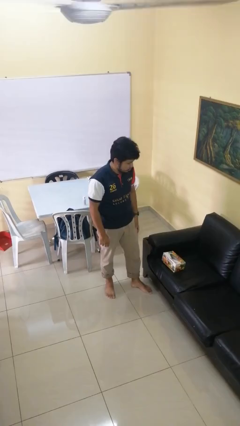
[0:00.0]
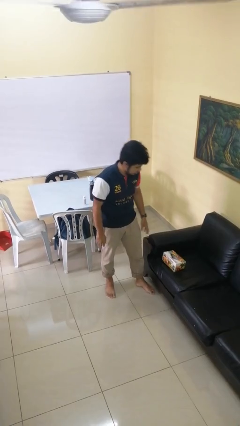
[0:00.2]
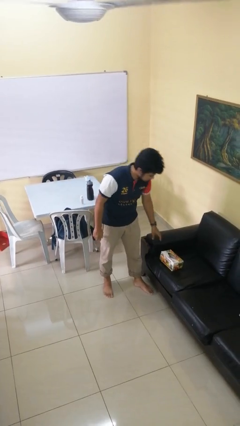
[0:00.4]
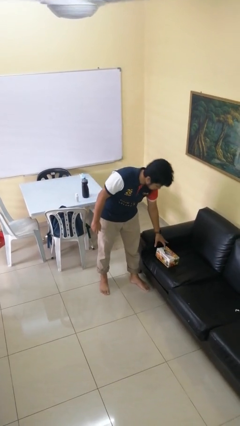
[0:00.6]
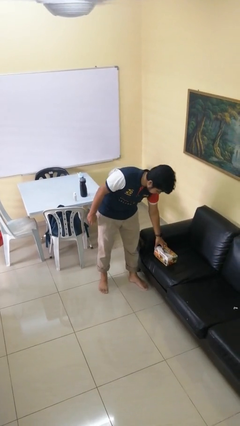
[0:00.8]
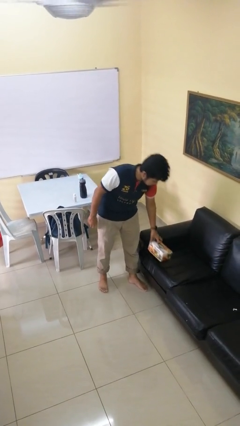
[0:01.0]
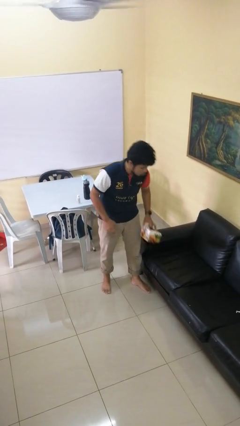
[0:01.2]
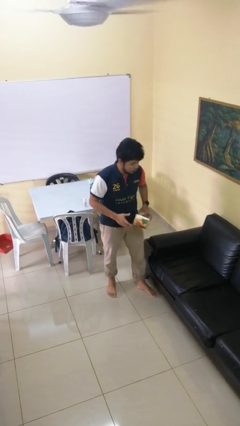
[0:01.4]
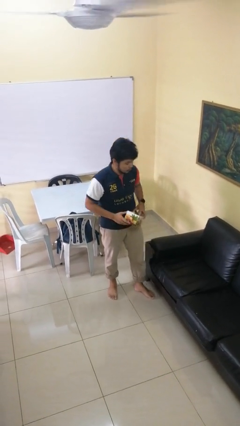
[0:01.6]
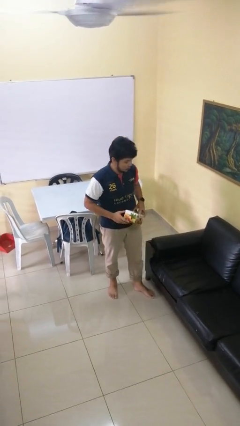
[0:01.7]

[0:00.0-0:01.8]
person picks up object from couch

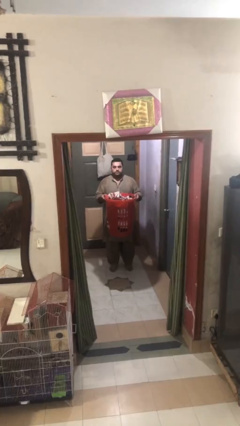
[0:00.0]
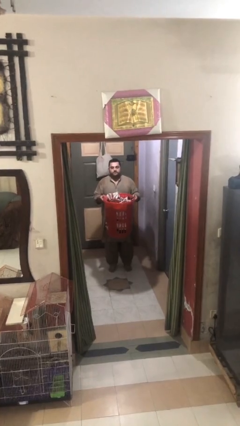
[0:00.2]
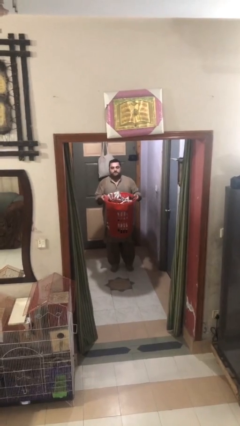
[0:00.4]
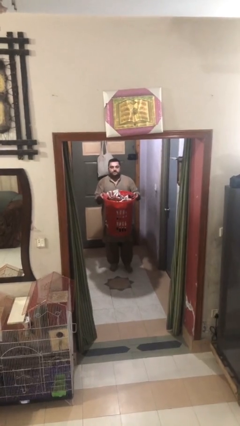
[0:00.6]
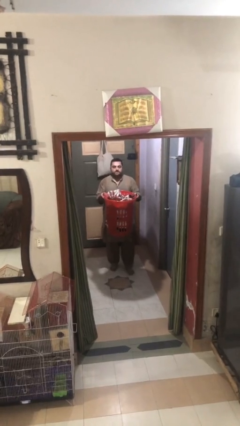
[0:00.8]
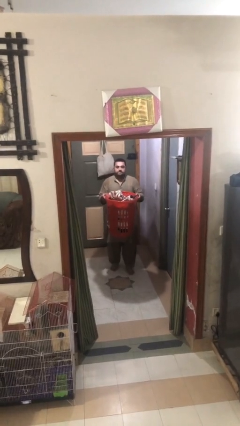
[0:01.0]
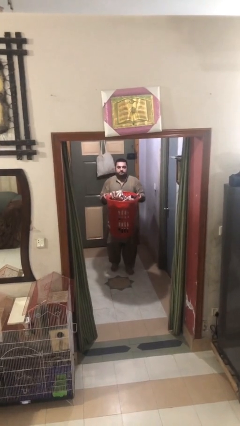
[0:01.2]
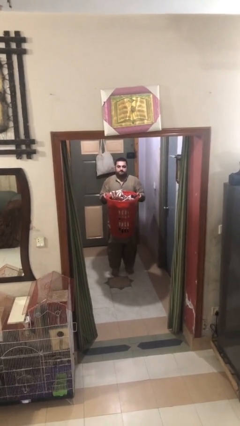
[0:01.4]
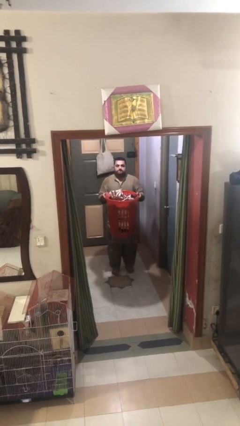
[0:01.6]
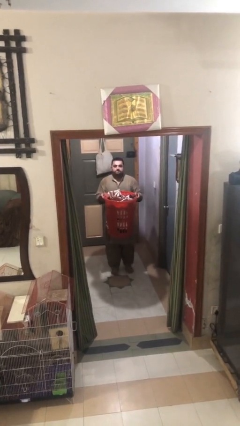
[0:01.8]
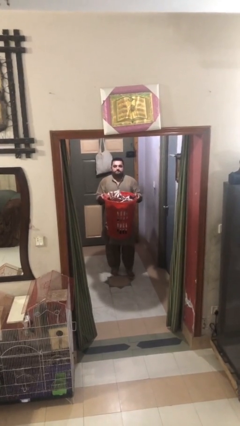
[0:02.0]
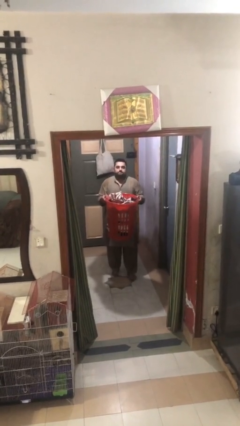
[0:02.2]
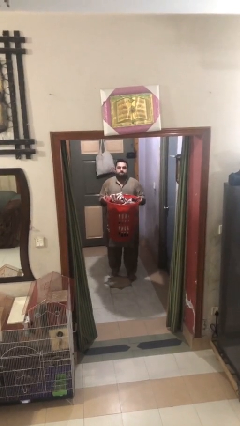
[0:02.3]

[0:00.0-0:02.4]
person carries laundry basket

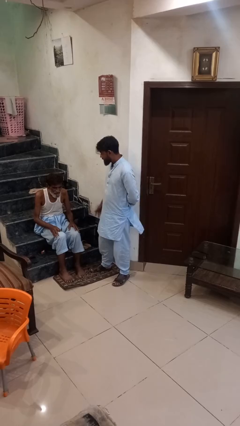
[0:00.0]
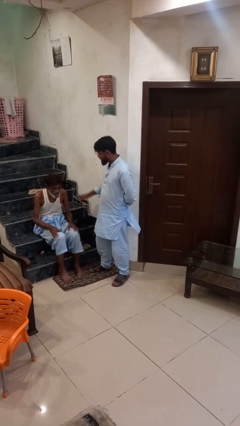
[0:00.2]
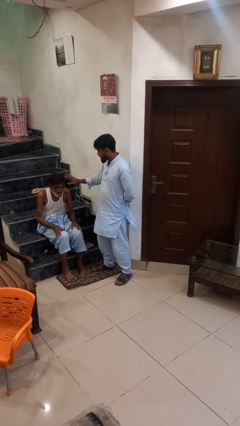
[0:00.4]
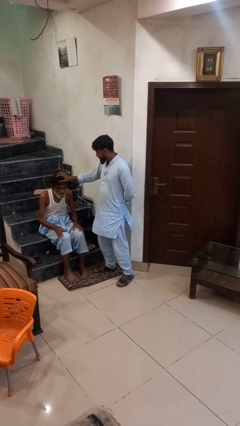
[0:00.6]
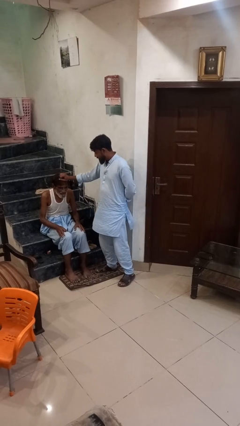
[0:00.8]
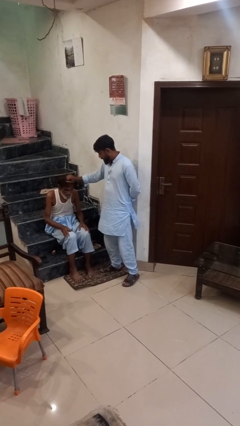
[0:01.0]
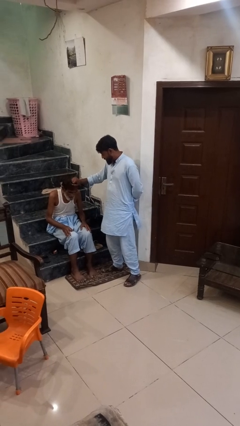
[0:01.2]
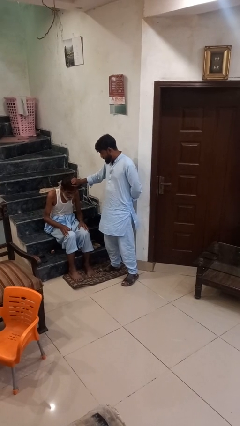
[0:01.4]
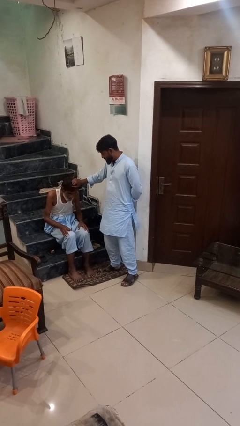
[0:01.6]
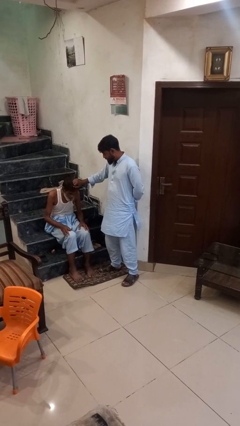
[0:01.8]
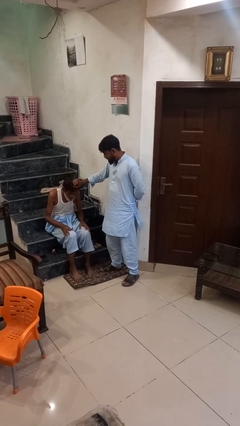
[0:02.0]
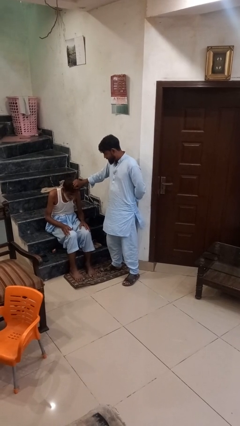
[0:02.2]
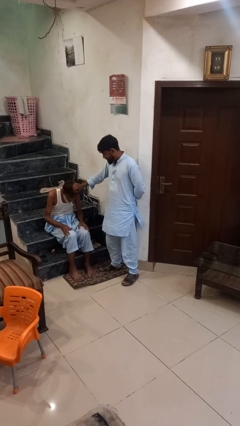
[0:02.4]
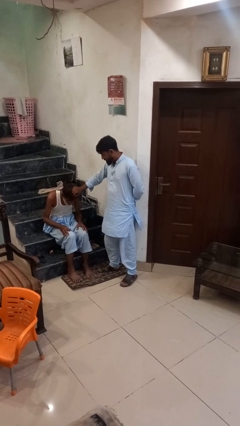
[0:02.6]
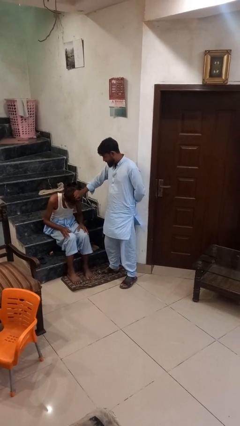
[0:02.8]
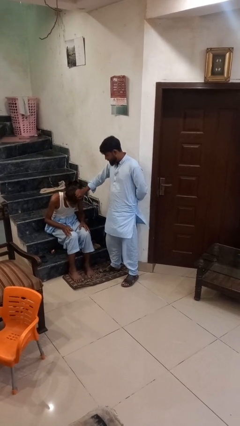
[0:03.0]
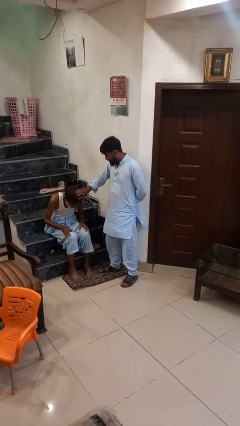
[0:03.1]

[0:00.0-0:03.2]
person grabs person by hair

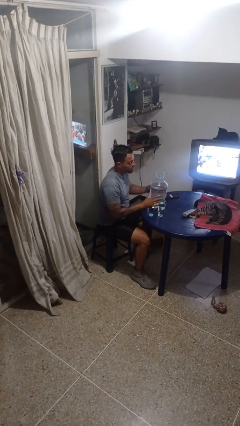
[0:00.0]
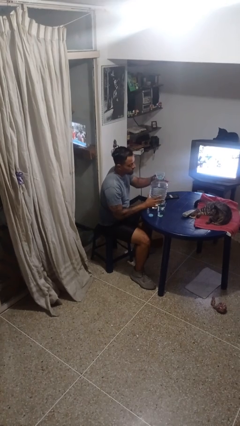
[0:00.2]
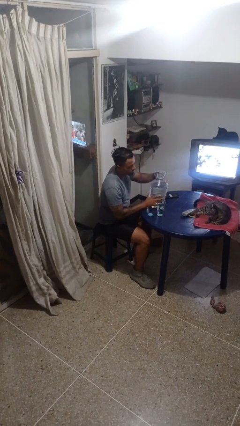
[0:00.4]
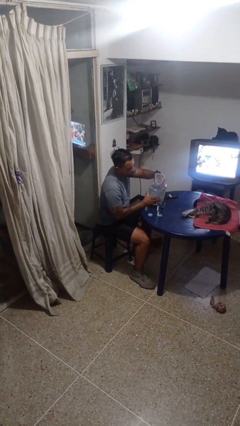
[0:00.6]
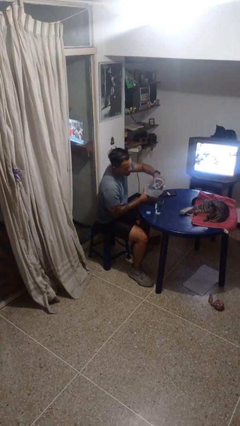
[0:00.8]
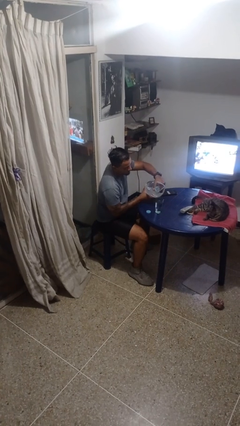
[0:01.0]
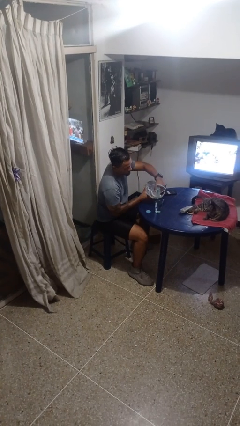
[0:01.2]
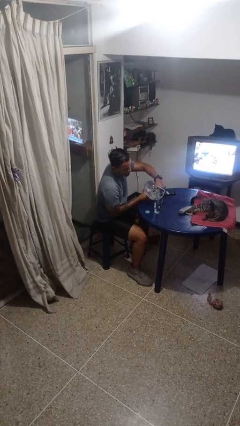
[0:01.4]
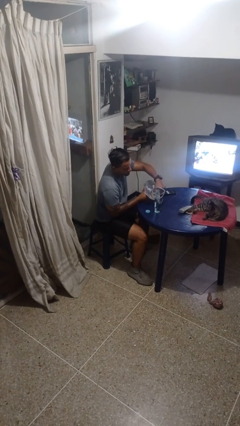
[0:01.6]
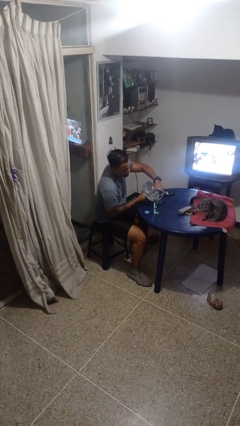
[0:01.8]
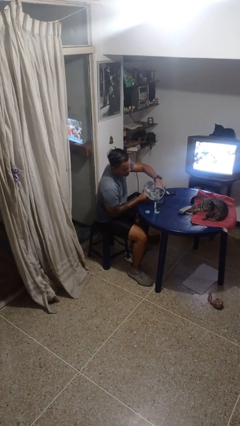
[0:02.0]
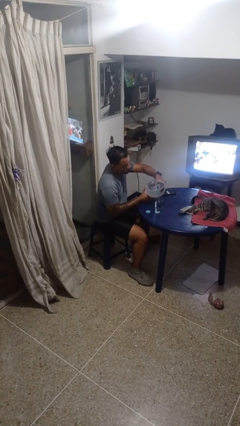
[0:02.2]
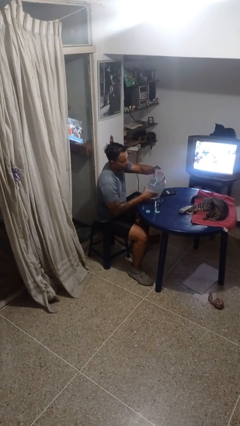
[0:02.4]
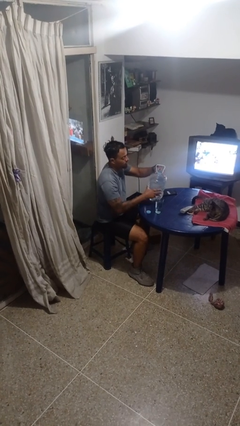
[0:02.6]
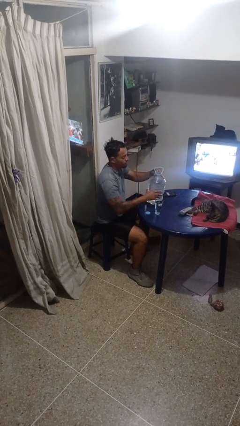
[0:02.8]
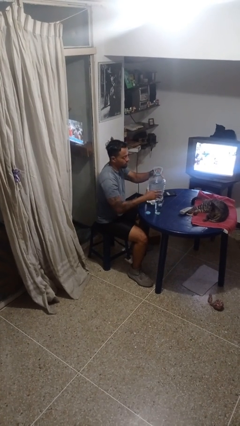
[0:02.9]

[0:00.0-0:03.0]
person pours liquid into cup

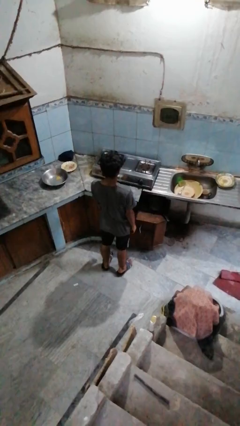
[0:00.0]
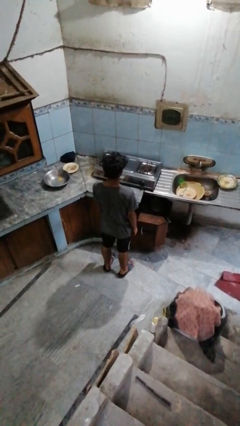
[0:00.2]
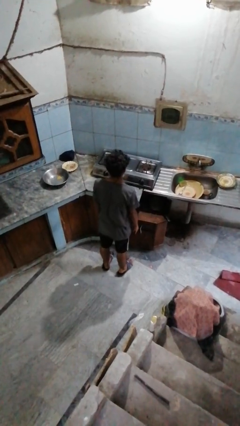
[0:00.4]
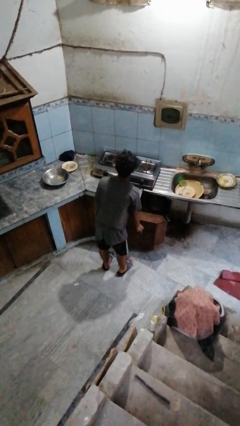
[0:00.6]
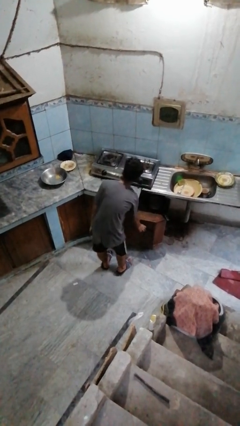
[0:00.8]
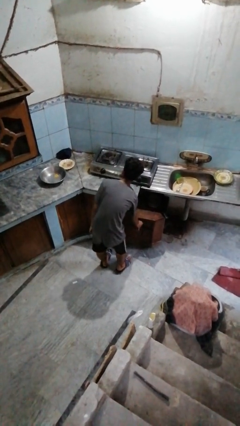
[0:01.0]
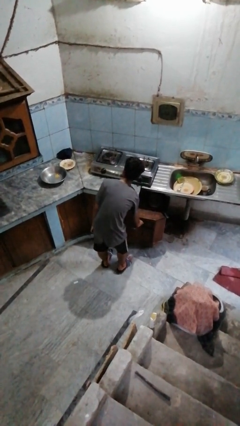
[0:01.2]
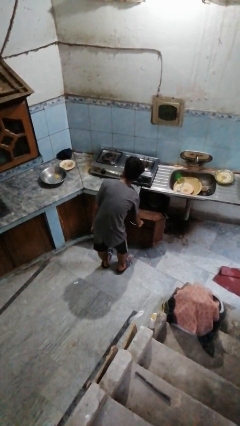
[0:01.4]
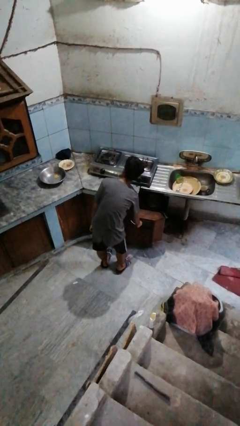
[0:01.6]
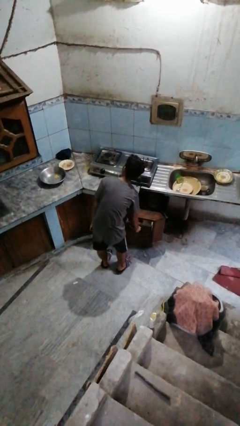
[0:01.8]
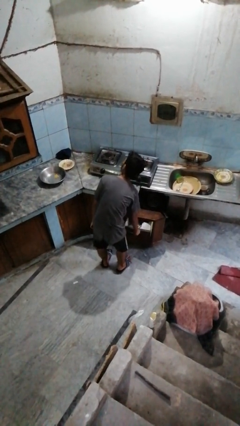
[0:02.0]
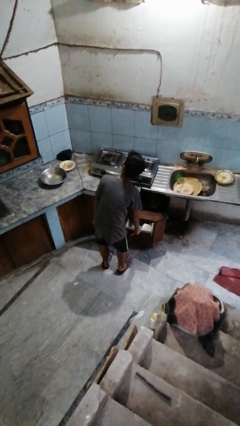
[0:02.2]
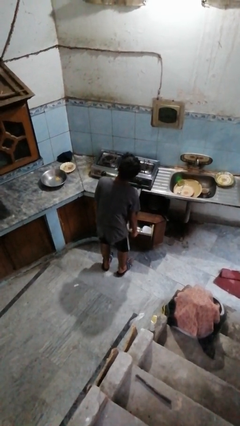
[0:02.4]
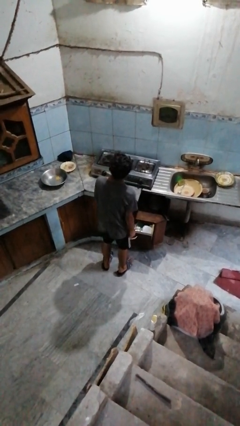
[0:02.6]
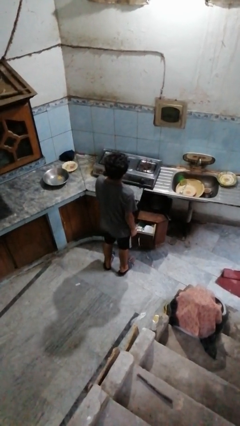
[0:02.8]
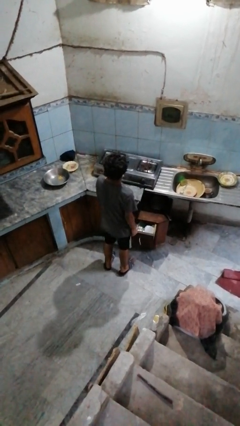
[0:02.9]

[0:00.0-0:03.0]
person opens kitchen drawer

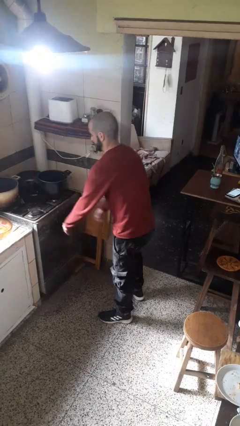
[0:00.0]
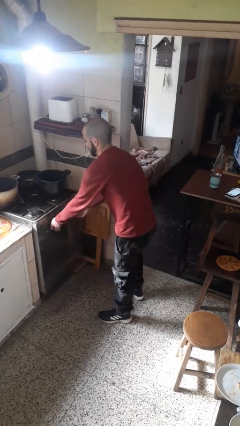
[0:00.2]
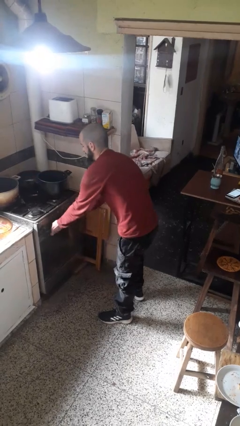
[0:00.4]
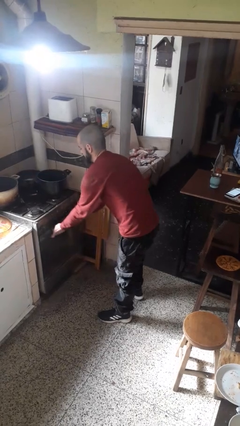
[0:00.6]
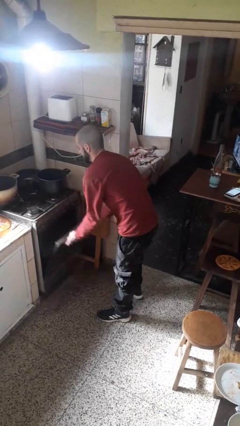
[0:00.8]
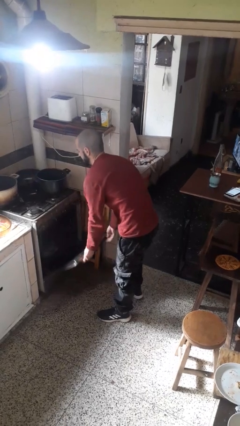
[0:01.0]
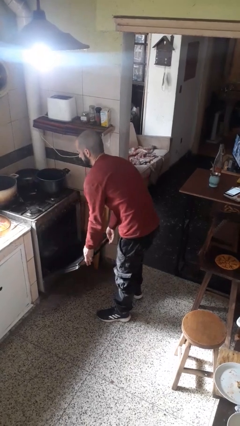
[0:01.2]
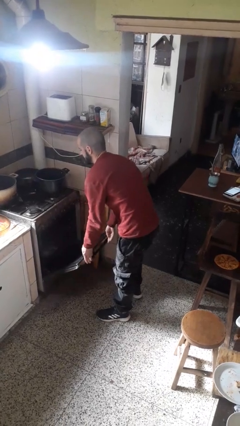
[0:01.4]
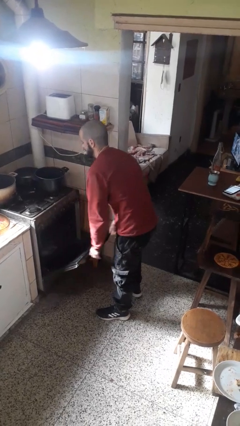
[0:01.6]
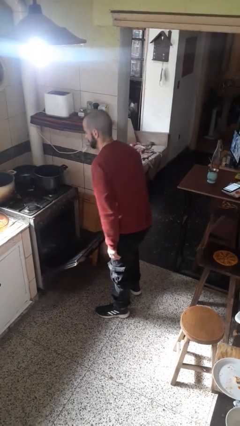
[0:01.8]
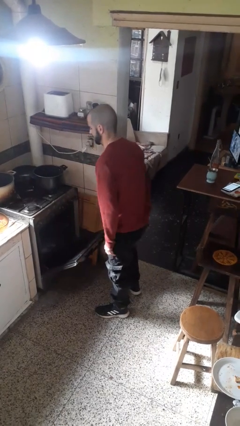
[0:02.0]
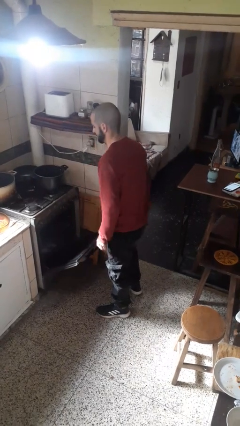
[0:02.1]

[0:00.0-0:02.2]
person opens oven door

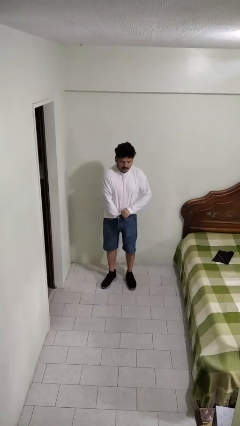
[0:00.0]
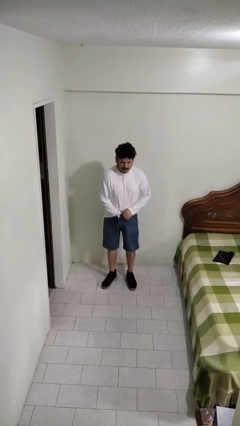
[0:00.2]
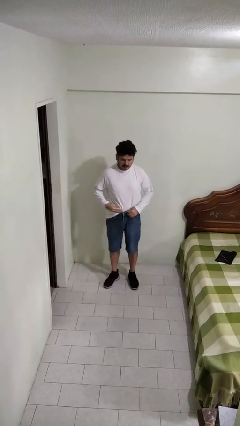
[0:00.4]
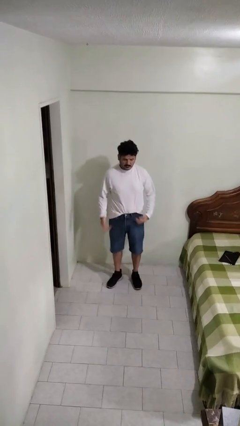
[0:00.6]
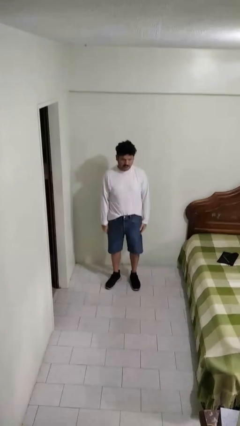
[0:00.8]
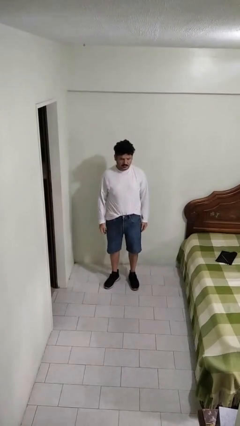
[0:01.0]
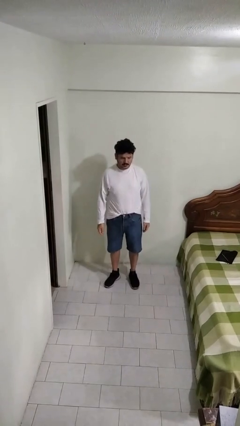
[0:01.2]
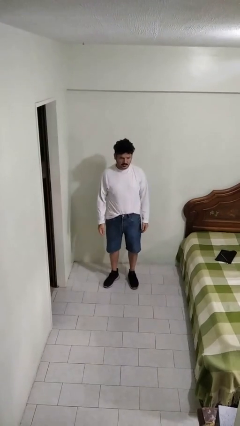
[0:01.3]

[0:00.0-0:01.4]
person tucks in shirt
